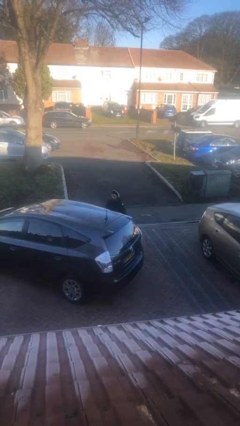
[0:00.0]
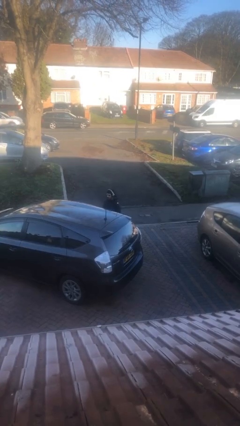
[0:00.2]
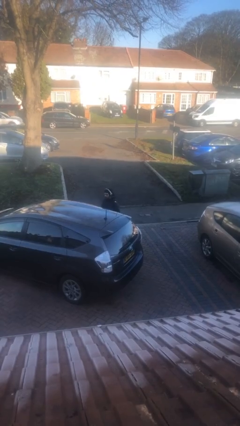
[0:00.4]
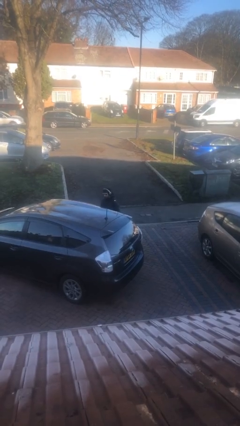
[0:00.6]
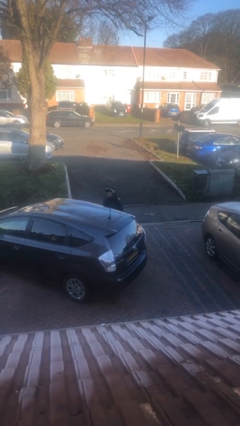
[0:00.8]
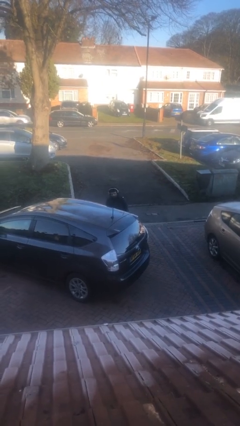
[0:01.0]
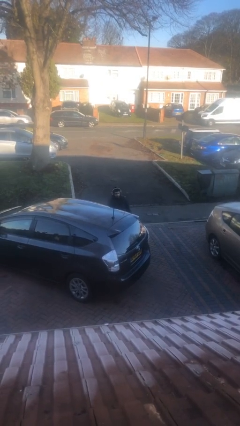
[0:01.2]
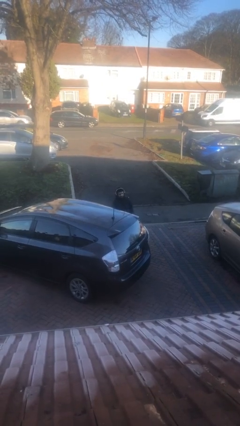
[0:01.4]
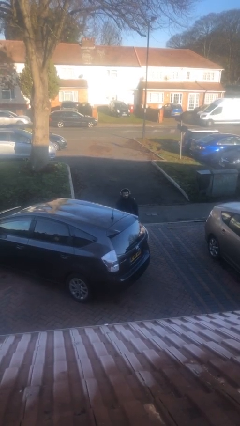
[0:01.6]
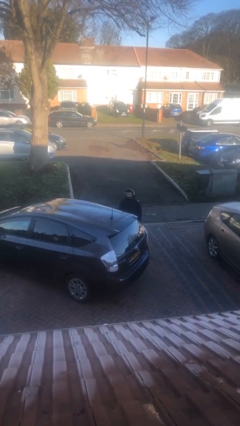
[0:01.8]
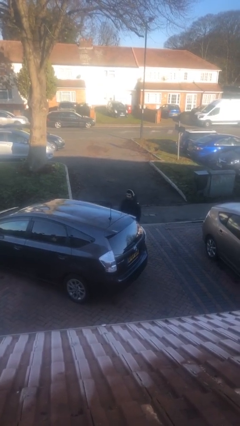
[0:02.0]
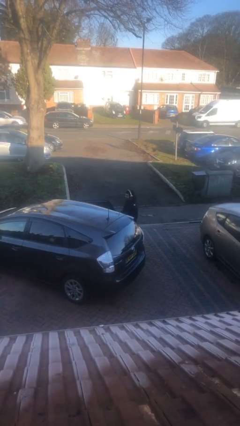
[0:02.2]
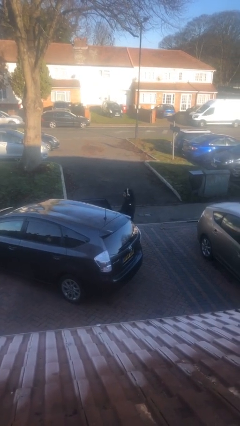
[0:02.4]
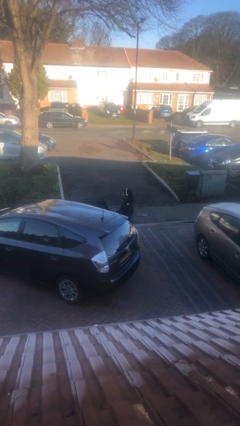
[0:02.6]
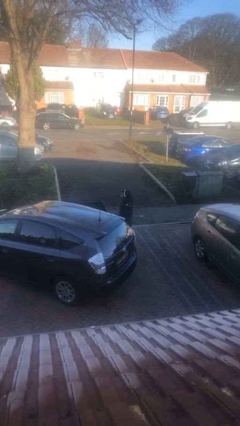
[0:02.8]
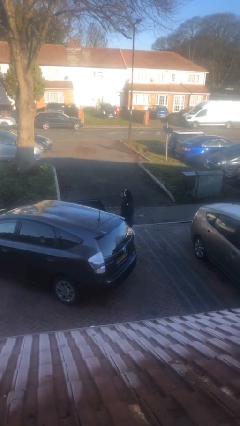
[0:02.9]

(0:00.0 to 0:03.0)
person opens car door

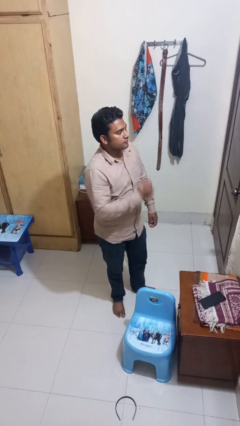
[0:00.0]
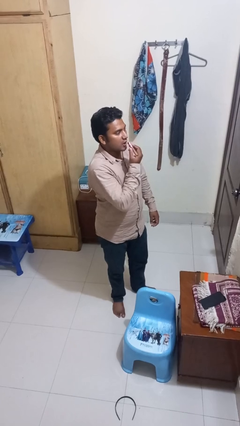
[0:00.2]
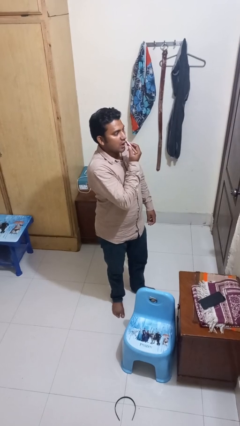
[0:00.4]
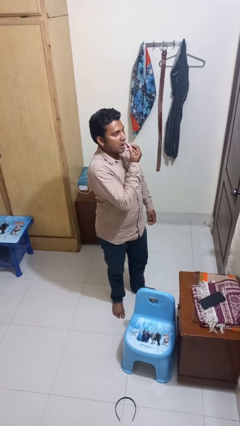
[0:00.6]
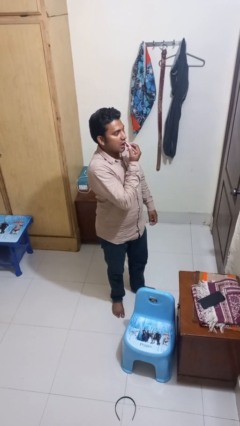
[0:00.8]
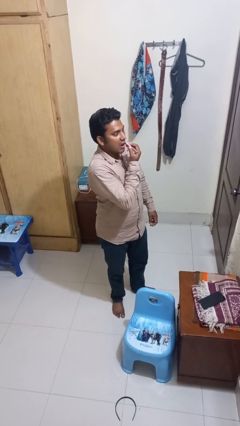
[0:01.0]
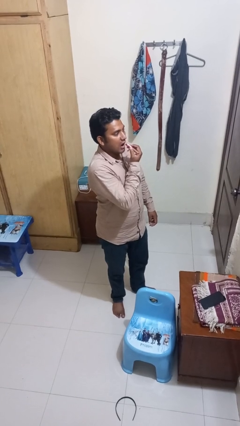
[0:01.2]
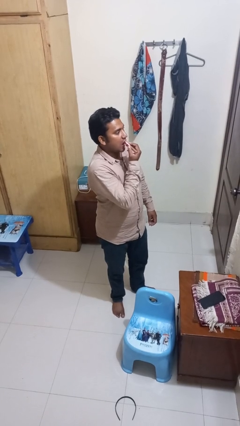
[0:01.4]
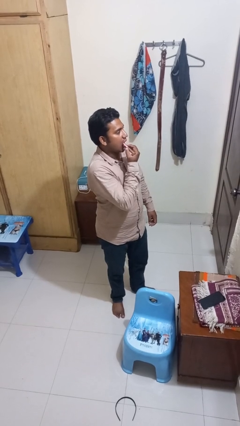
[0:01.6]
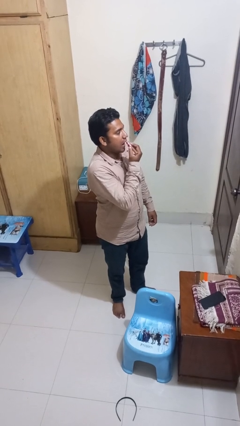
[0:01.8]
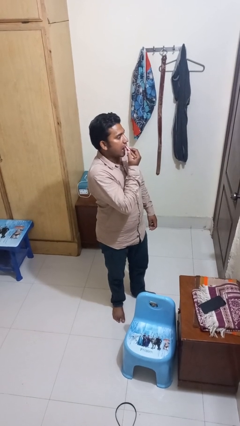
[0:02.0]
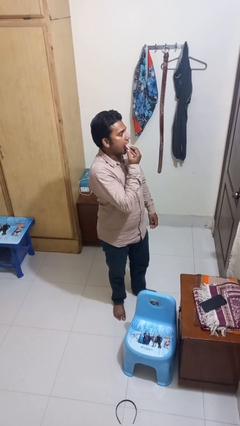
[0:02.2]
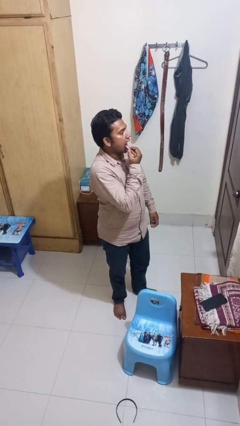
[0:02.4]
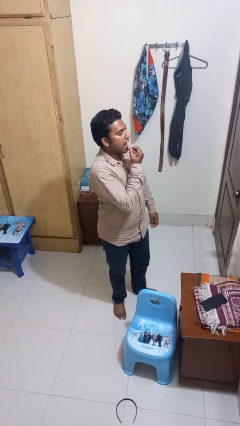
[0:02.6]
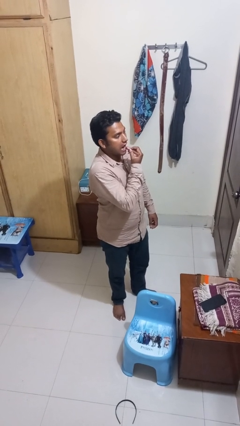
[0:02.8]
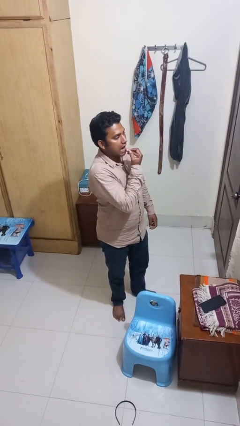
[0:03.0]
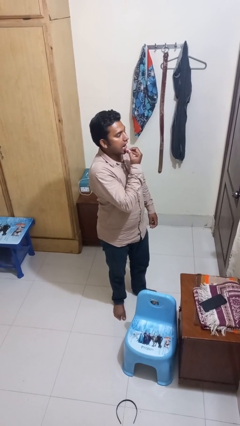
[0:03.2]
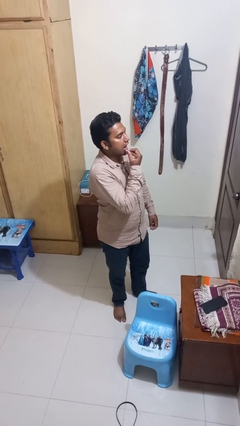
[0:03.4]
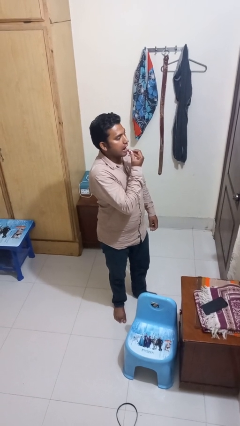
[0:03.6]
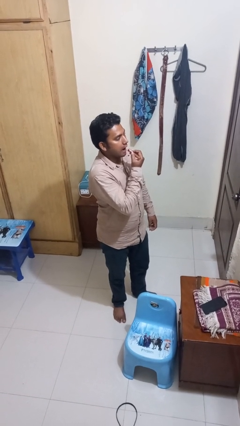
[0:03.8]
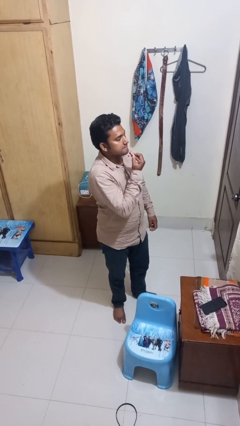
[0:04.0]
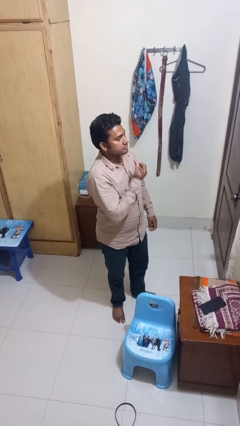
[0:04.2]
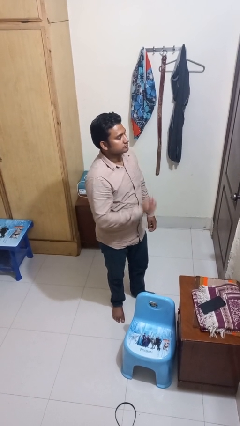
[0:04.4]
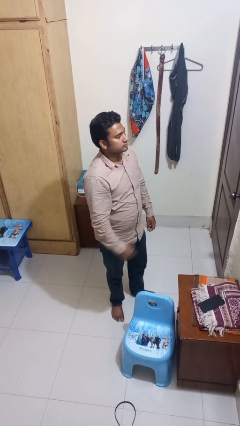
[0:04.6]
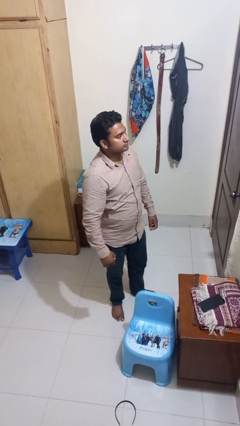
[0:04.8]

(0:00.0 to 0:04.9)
person applies lip makeup

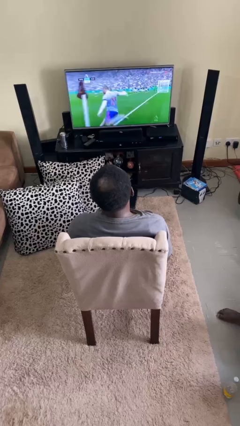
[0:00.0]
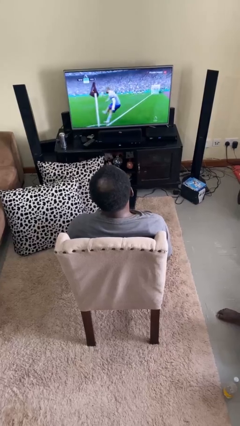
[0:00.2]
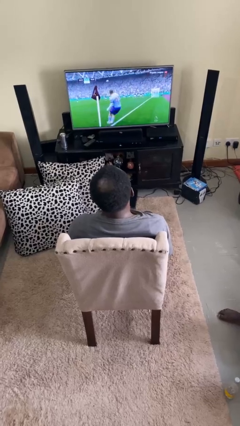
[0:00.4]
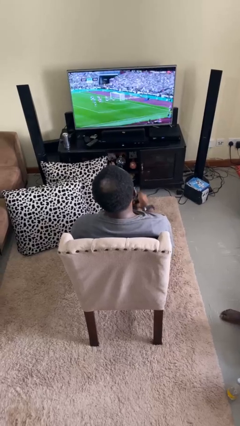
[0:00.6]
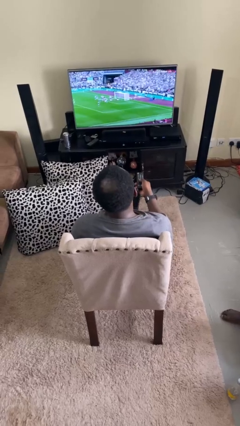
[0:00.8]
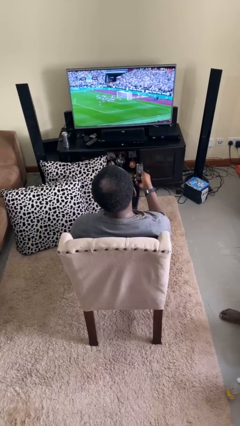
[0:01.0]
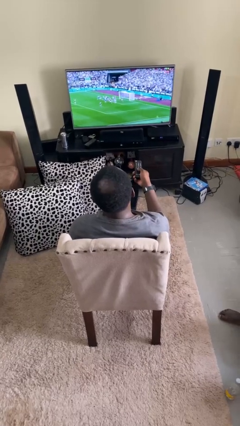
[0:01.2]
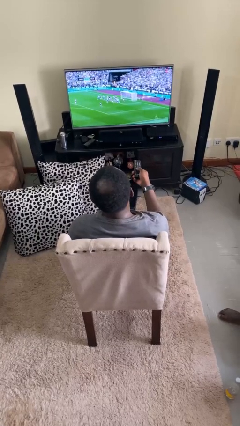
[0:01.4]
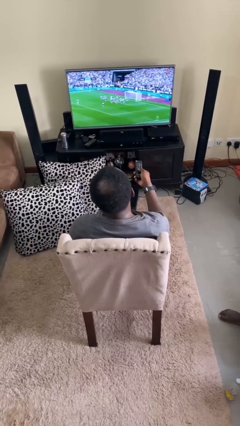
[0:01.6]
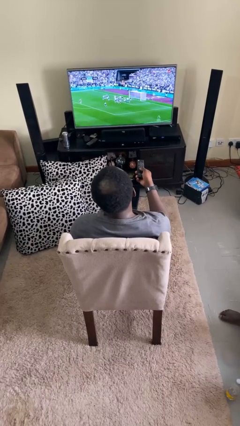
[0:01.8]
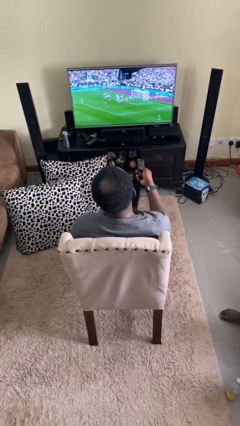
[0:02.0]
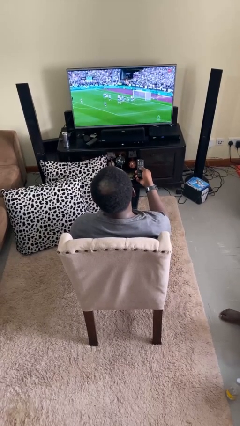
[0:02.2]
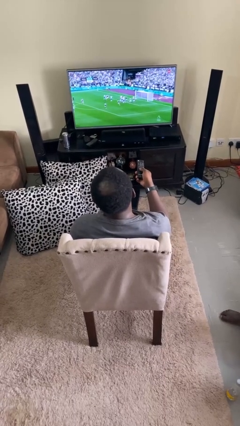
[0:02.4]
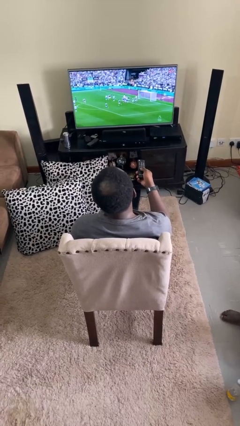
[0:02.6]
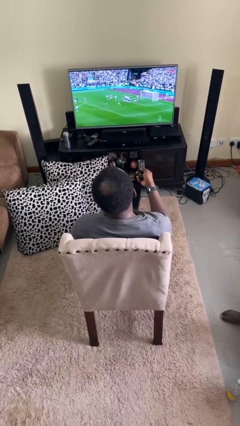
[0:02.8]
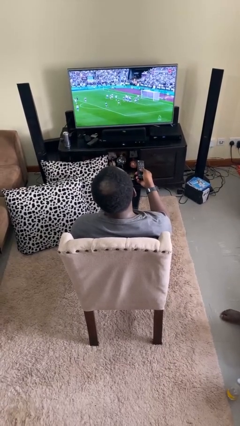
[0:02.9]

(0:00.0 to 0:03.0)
person uses television remote

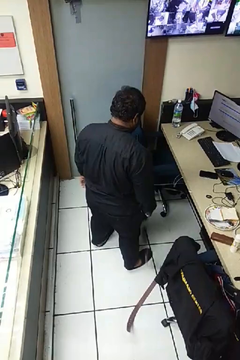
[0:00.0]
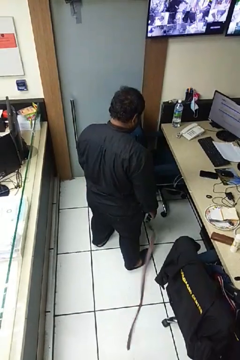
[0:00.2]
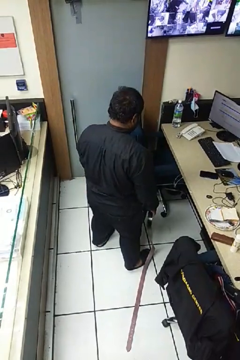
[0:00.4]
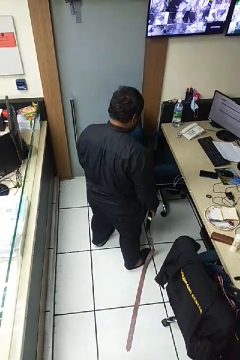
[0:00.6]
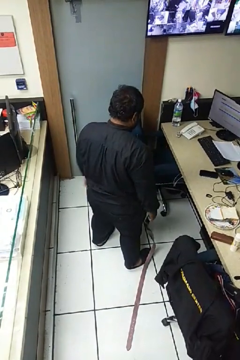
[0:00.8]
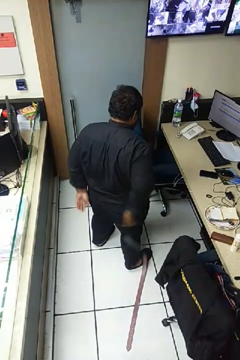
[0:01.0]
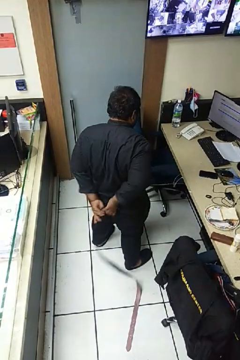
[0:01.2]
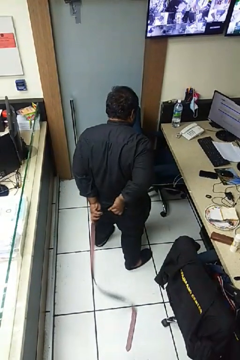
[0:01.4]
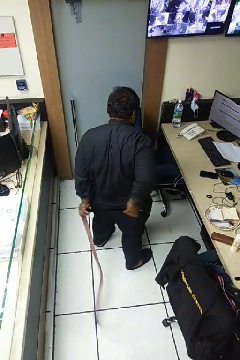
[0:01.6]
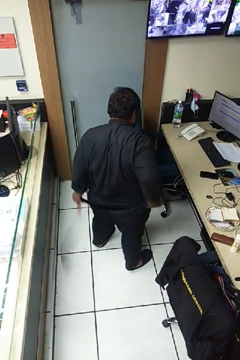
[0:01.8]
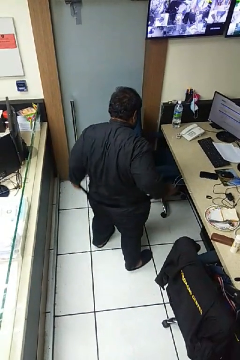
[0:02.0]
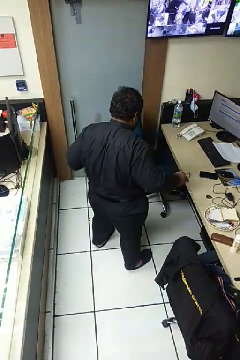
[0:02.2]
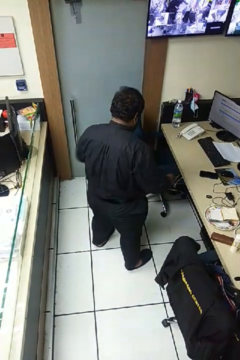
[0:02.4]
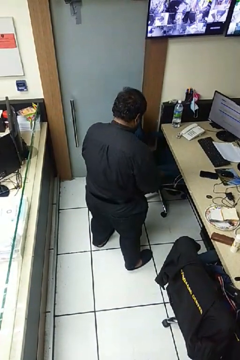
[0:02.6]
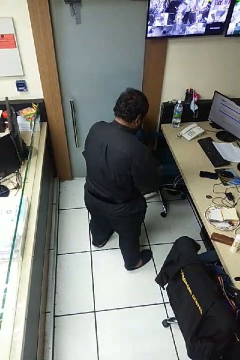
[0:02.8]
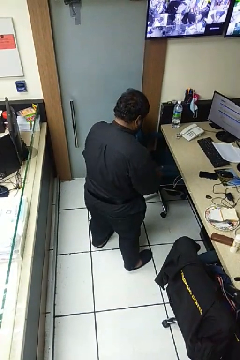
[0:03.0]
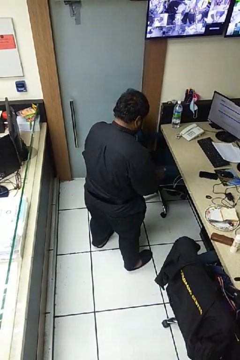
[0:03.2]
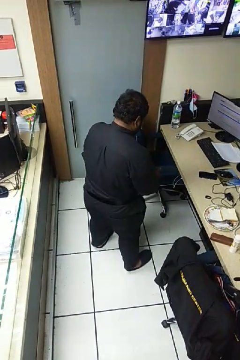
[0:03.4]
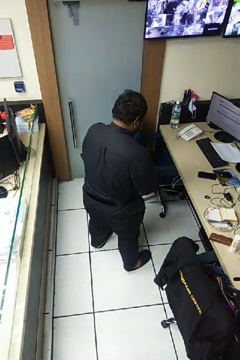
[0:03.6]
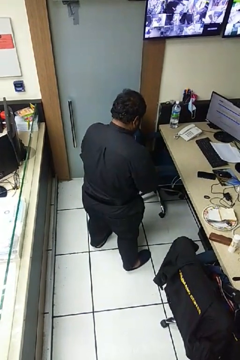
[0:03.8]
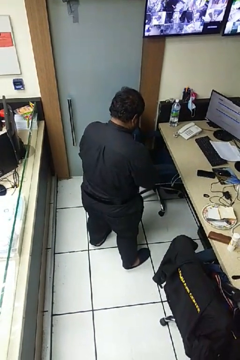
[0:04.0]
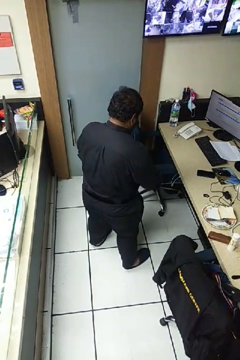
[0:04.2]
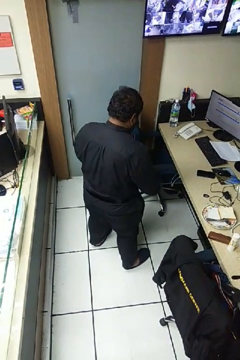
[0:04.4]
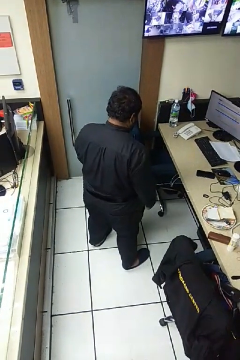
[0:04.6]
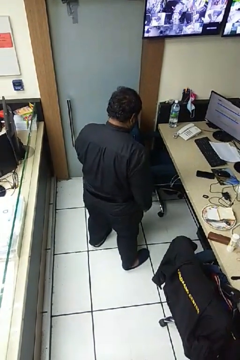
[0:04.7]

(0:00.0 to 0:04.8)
person puts on belt

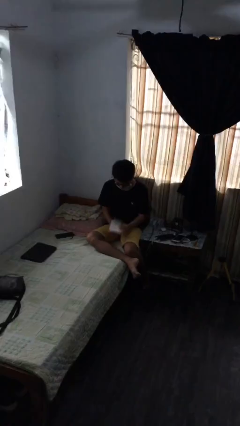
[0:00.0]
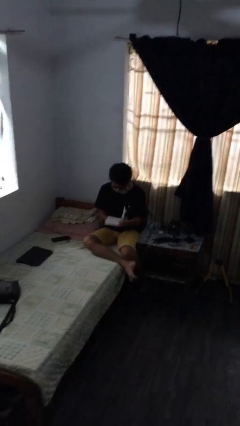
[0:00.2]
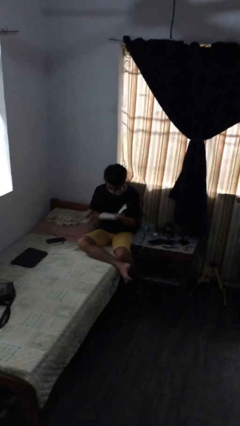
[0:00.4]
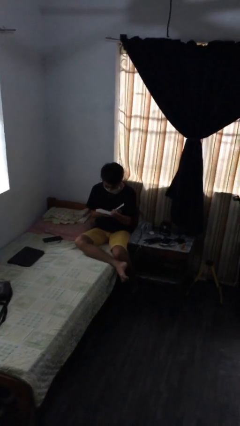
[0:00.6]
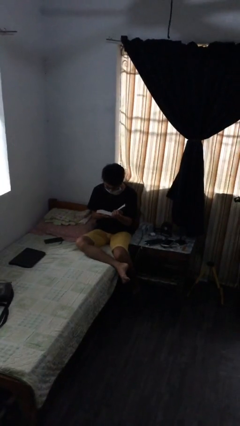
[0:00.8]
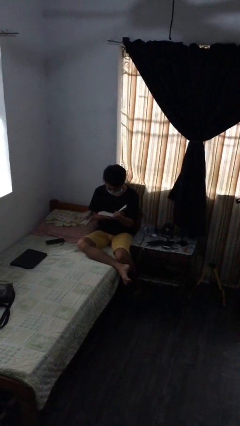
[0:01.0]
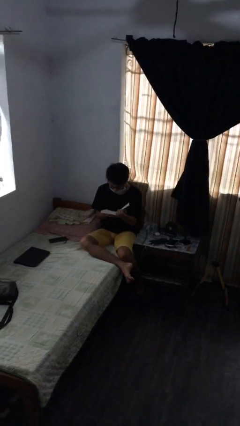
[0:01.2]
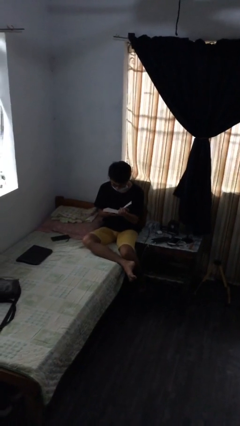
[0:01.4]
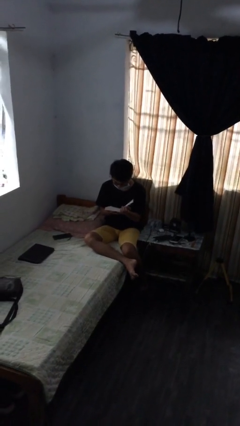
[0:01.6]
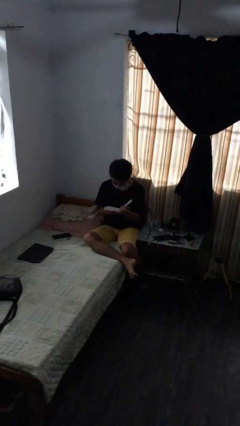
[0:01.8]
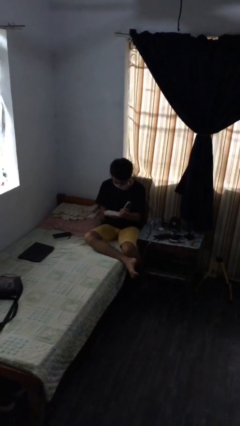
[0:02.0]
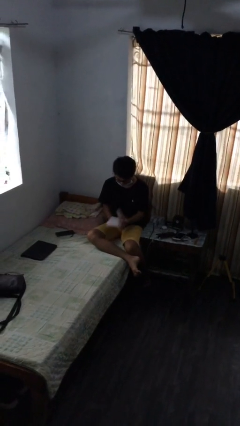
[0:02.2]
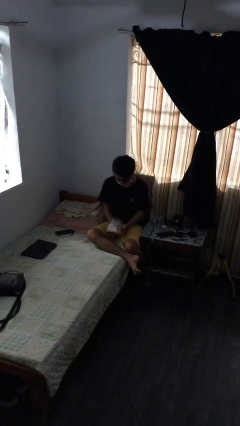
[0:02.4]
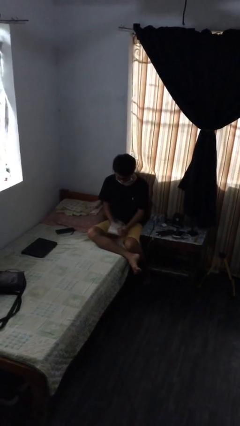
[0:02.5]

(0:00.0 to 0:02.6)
person reads document

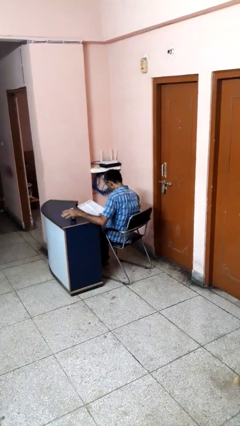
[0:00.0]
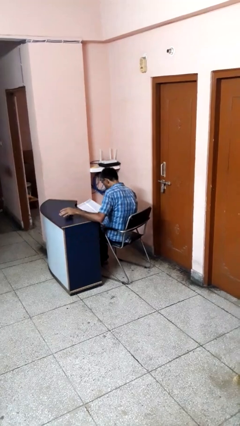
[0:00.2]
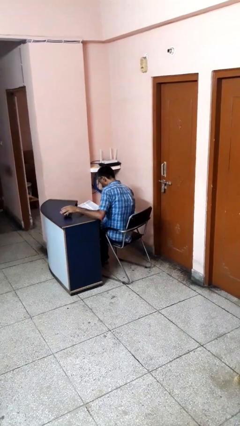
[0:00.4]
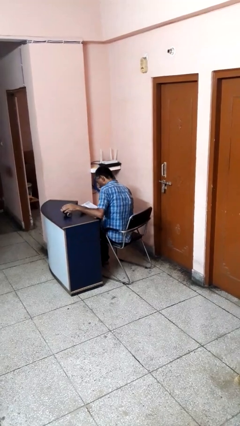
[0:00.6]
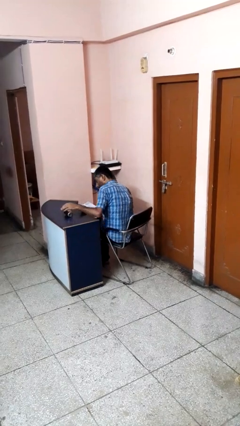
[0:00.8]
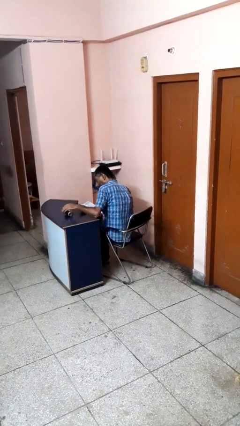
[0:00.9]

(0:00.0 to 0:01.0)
person knocks over glass
